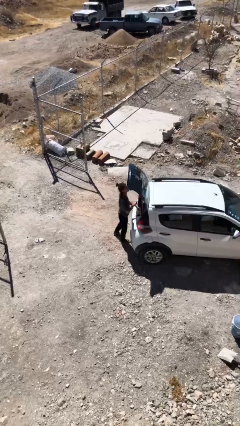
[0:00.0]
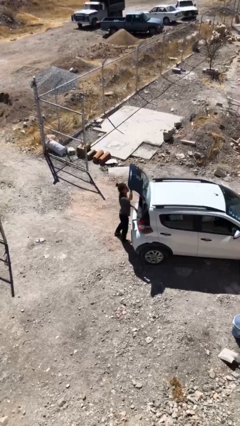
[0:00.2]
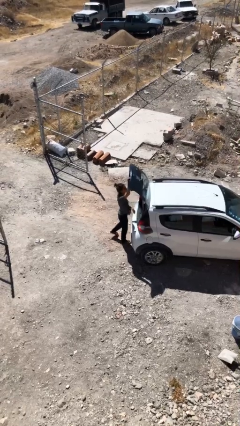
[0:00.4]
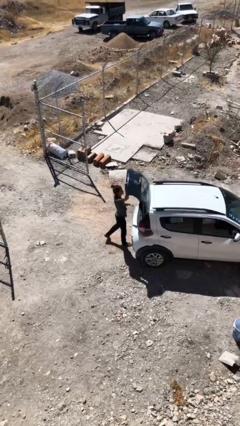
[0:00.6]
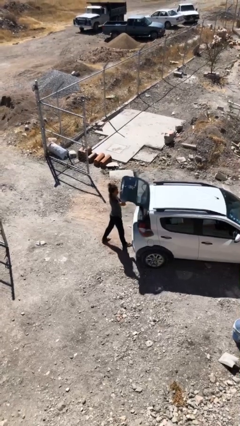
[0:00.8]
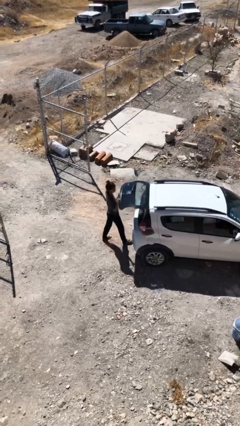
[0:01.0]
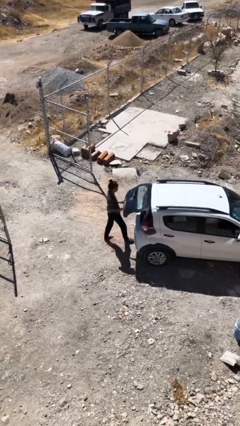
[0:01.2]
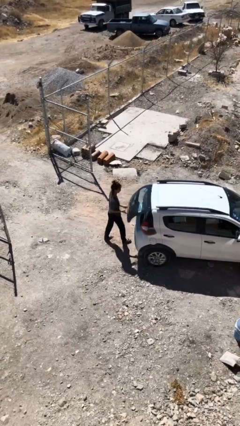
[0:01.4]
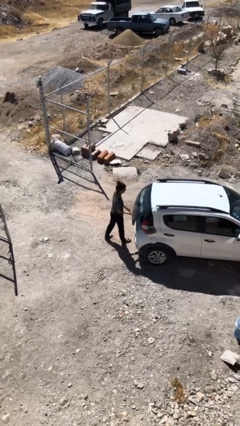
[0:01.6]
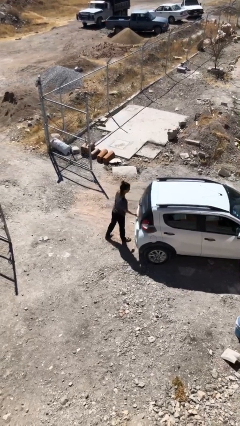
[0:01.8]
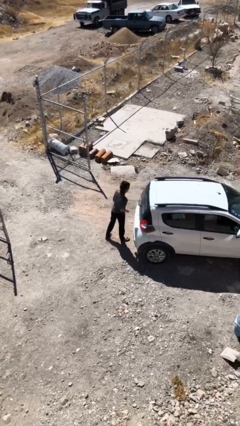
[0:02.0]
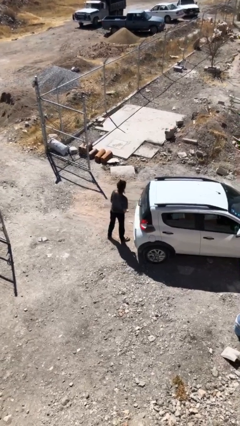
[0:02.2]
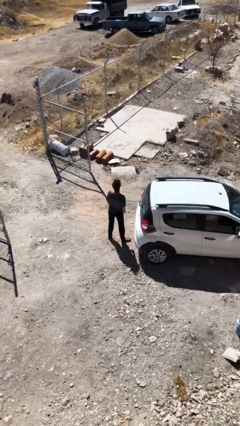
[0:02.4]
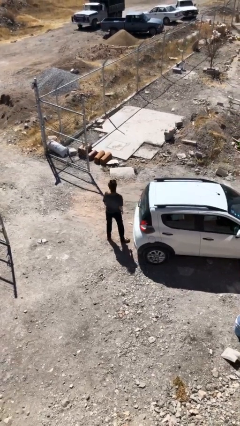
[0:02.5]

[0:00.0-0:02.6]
person closes car trunk

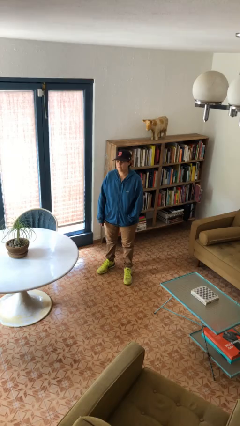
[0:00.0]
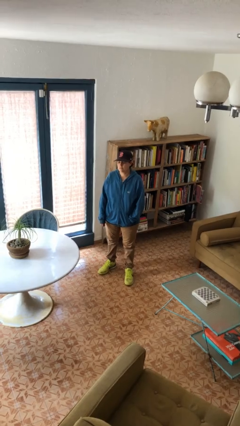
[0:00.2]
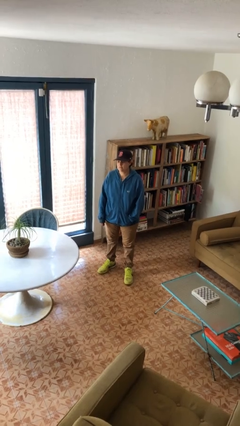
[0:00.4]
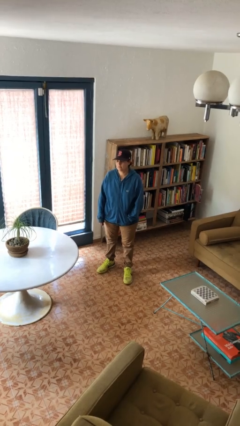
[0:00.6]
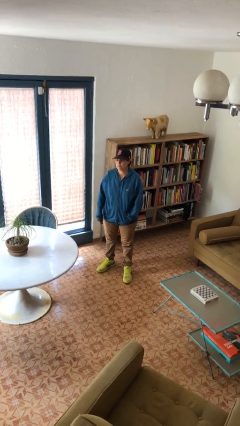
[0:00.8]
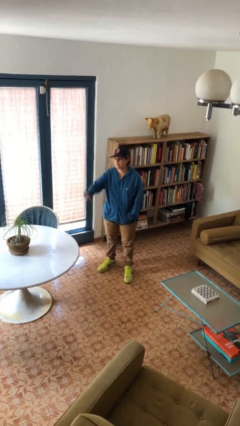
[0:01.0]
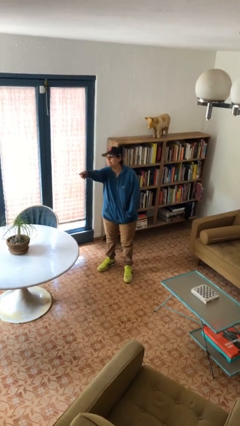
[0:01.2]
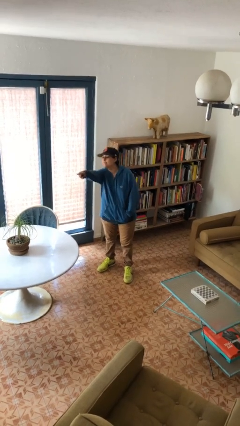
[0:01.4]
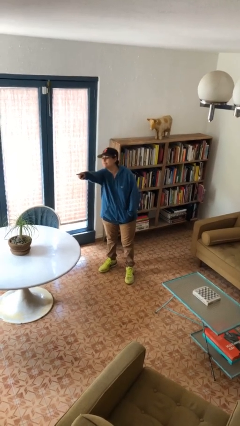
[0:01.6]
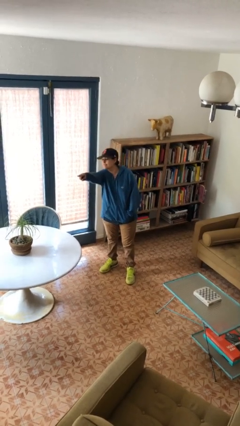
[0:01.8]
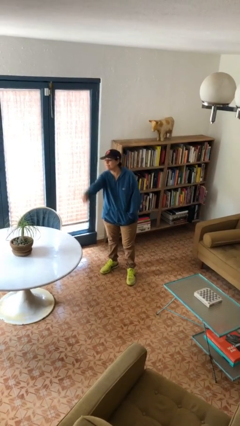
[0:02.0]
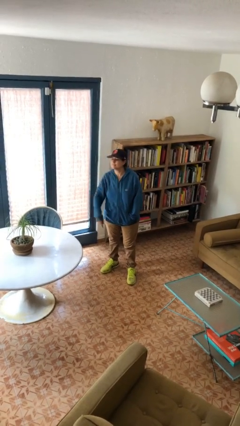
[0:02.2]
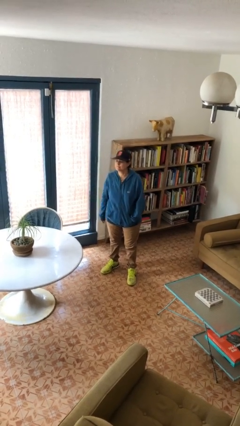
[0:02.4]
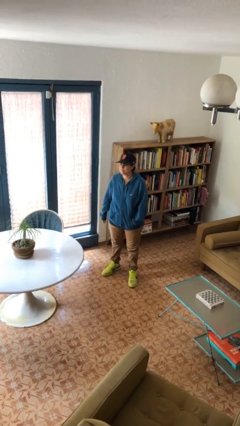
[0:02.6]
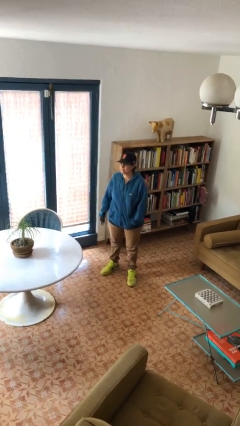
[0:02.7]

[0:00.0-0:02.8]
person points at person

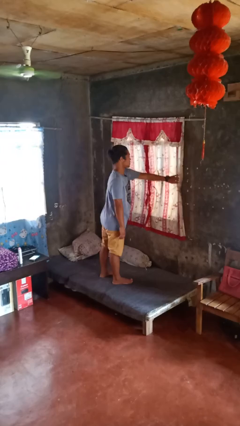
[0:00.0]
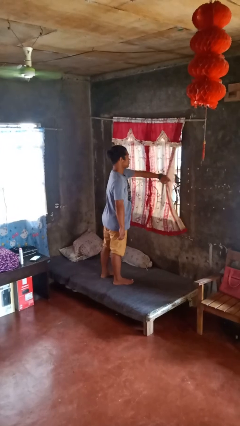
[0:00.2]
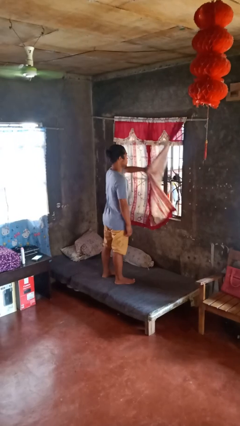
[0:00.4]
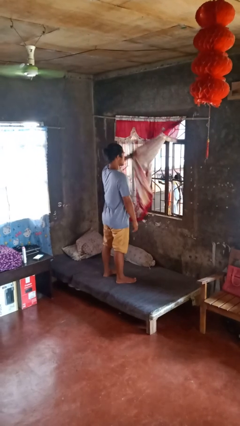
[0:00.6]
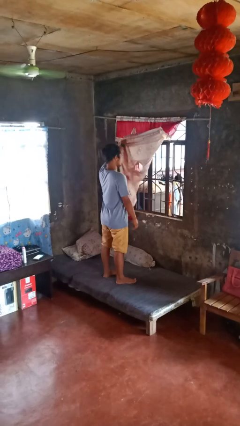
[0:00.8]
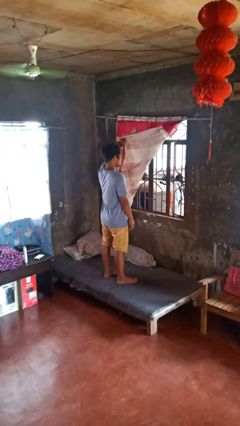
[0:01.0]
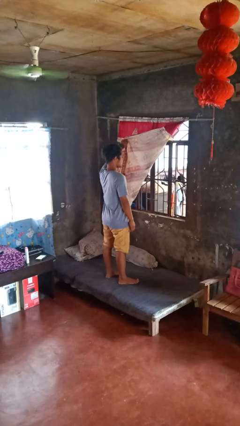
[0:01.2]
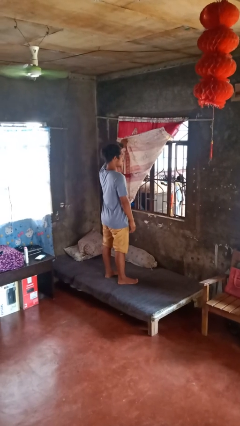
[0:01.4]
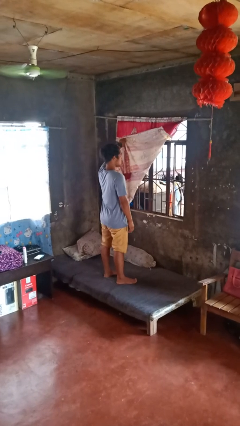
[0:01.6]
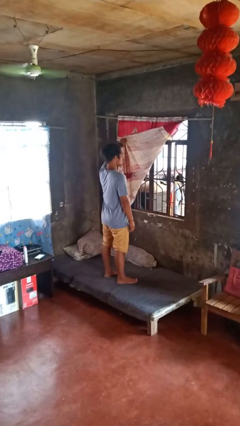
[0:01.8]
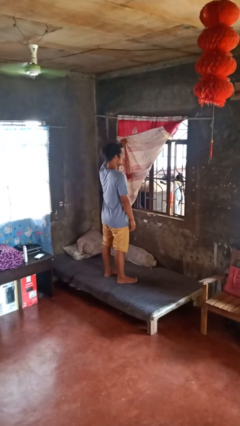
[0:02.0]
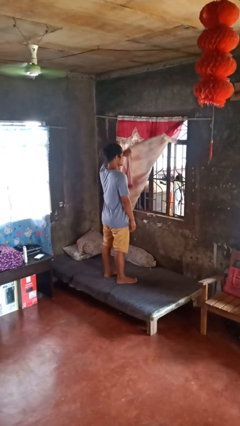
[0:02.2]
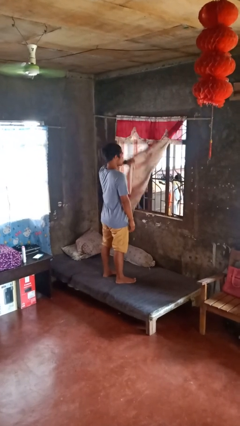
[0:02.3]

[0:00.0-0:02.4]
person opens curtains

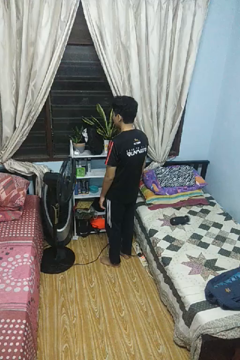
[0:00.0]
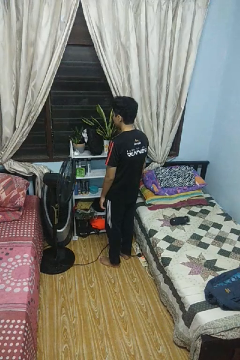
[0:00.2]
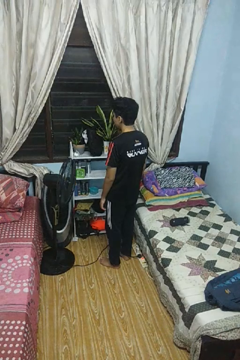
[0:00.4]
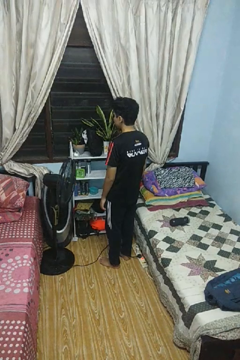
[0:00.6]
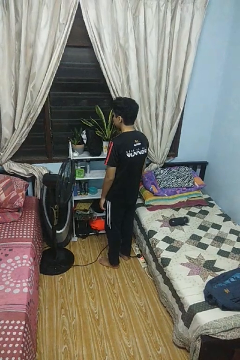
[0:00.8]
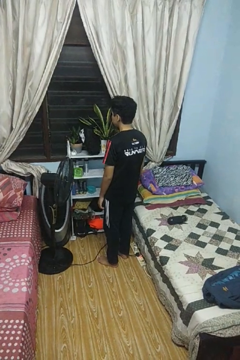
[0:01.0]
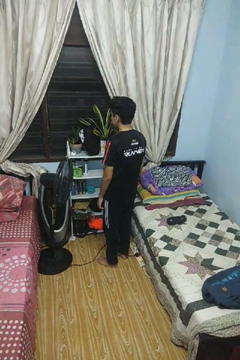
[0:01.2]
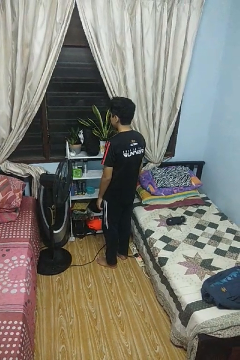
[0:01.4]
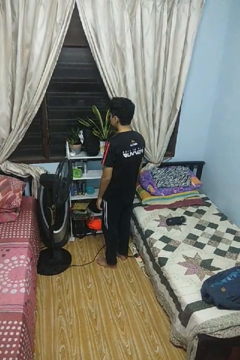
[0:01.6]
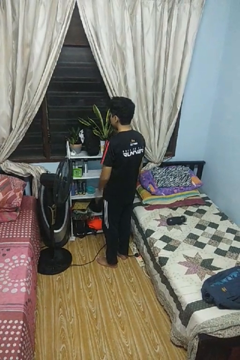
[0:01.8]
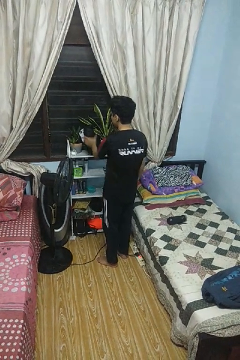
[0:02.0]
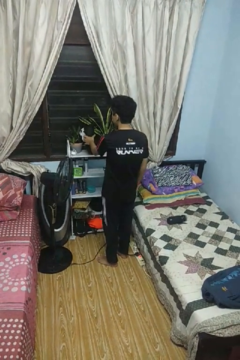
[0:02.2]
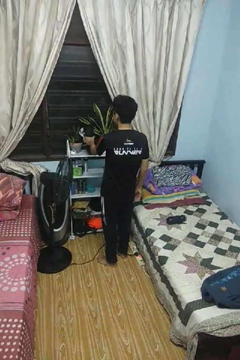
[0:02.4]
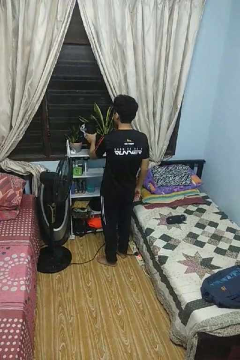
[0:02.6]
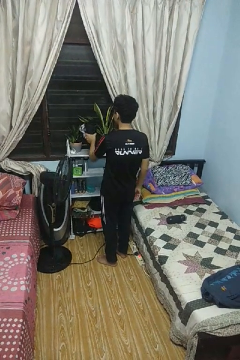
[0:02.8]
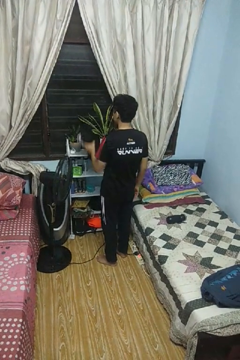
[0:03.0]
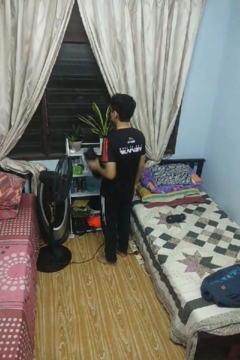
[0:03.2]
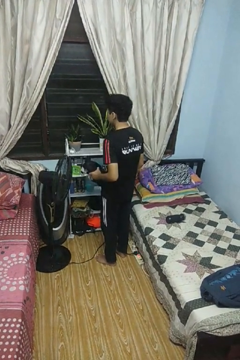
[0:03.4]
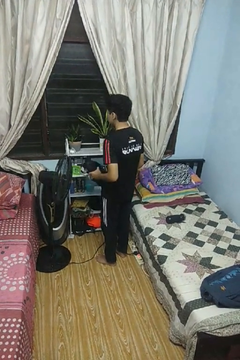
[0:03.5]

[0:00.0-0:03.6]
person picks up object from countertop

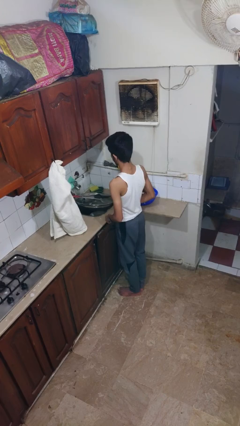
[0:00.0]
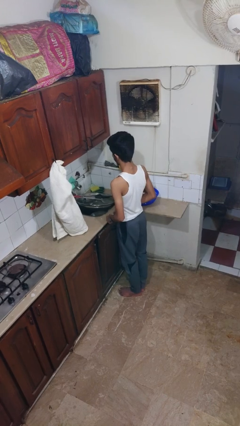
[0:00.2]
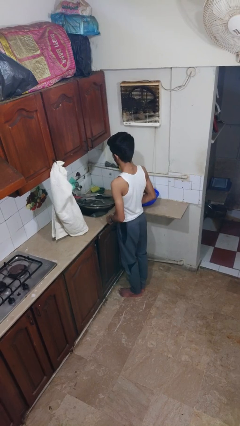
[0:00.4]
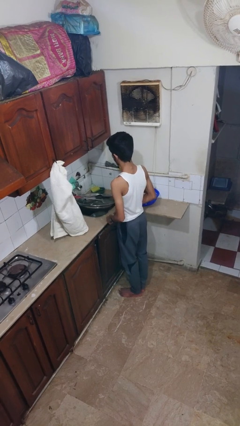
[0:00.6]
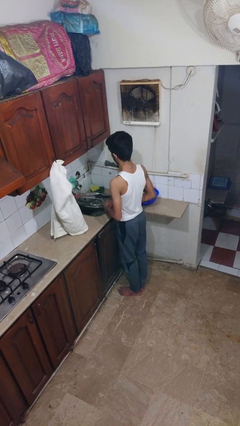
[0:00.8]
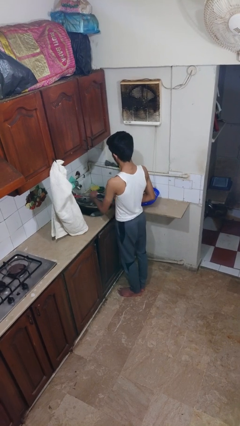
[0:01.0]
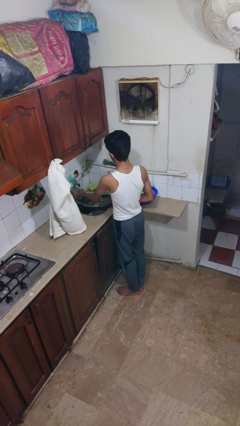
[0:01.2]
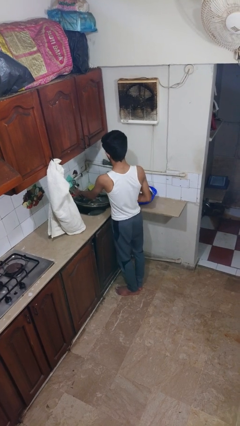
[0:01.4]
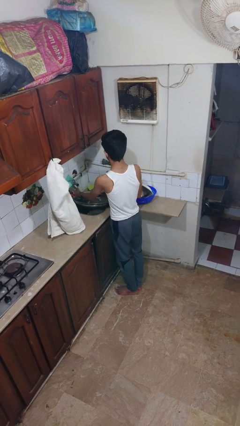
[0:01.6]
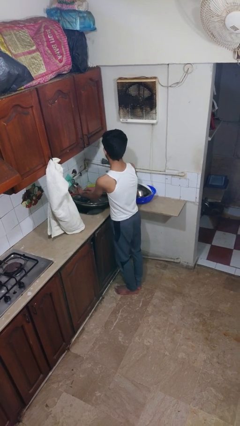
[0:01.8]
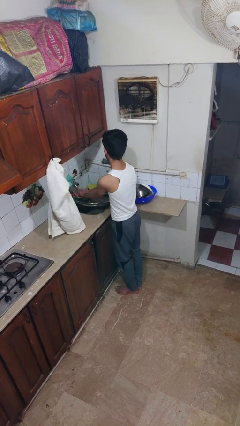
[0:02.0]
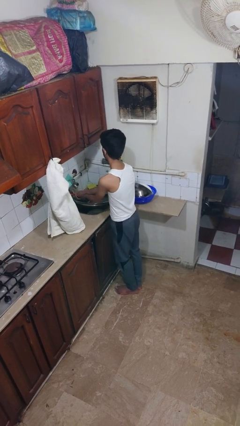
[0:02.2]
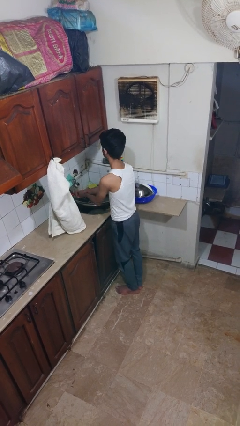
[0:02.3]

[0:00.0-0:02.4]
person washes hands

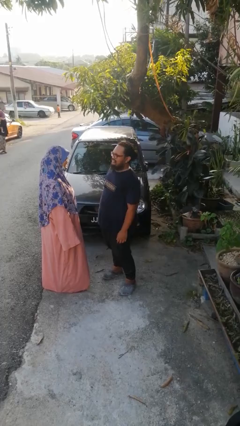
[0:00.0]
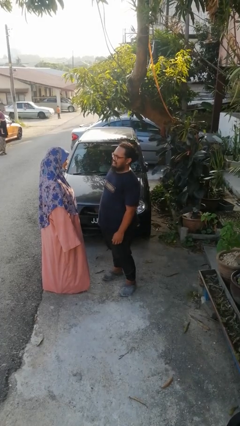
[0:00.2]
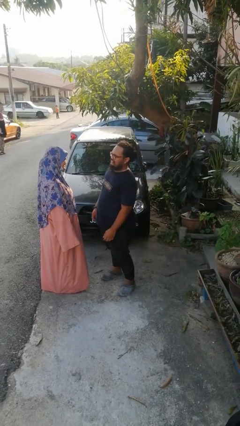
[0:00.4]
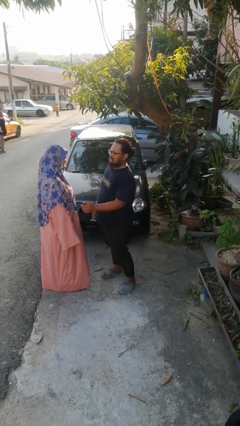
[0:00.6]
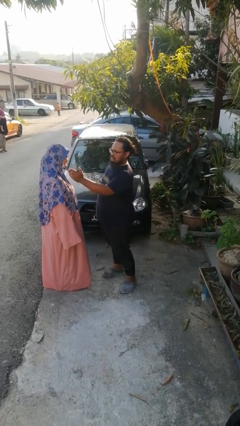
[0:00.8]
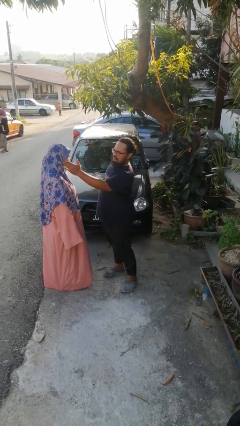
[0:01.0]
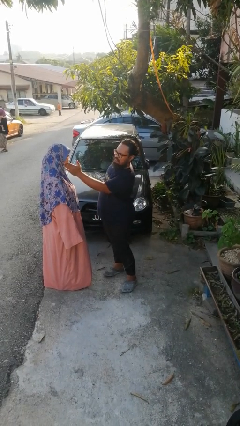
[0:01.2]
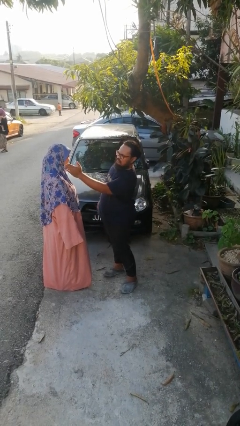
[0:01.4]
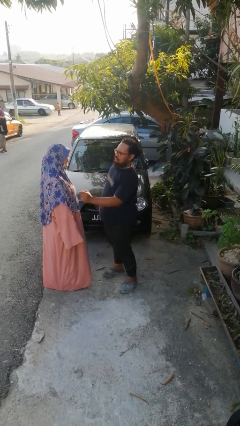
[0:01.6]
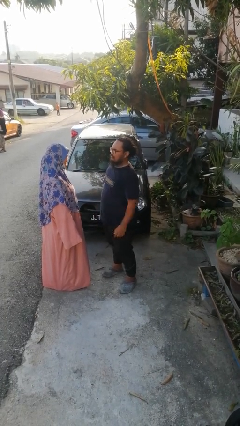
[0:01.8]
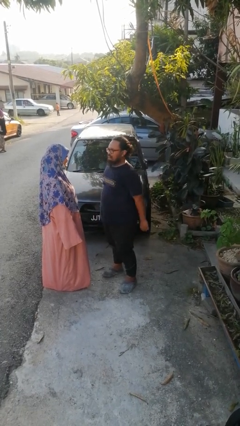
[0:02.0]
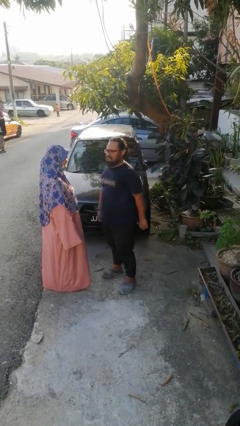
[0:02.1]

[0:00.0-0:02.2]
person touches face of person

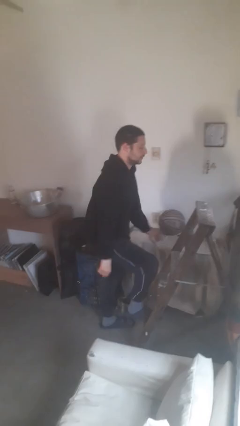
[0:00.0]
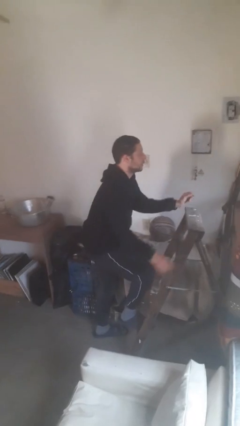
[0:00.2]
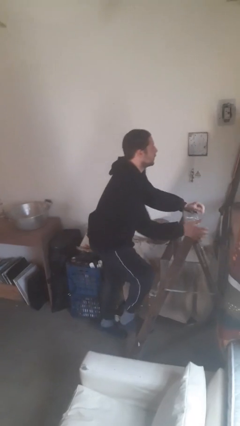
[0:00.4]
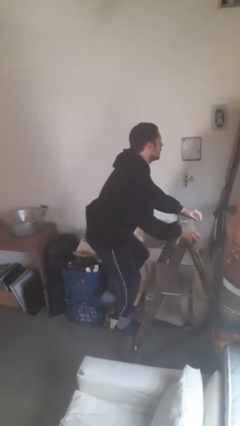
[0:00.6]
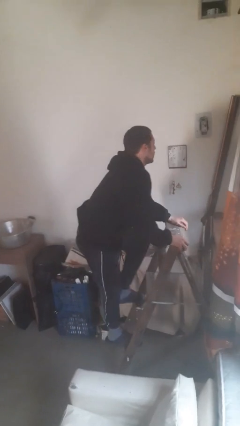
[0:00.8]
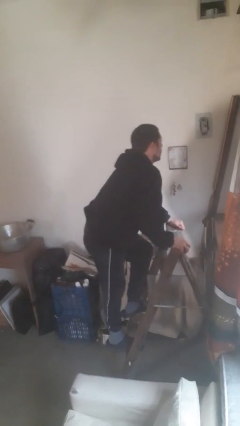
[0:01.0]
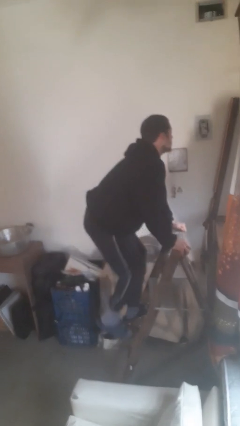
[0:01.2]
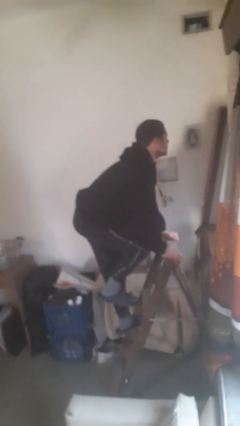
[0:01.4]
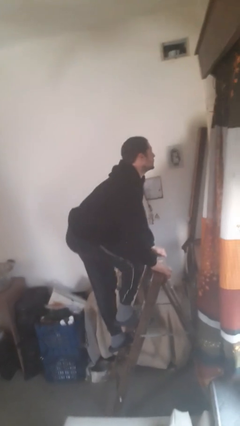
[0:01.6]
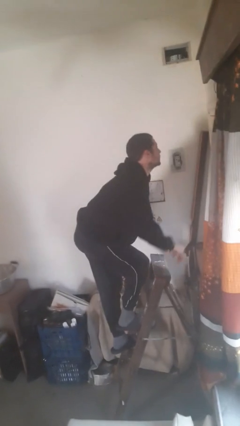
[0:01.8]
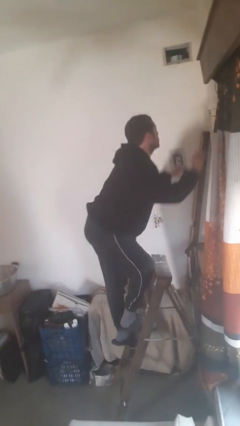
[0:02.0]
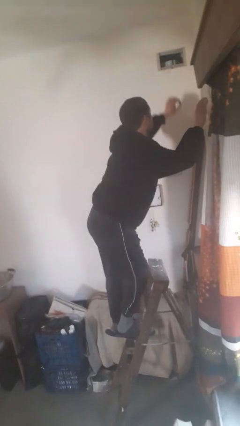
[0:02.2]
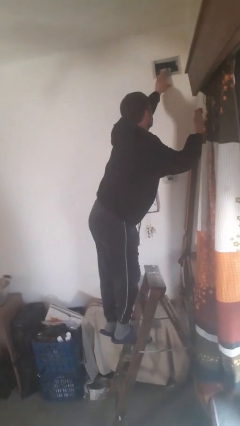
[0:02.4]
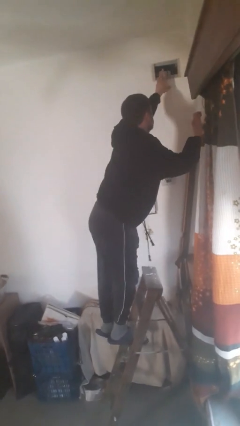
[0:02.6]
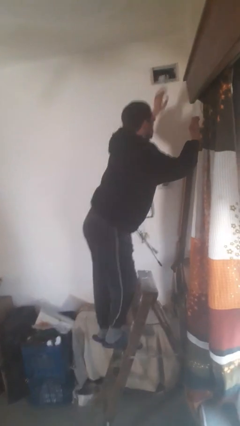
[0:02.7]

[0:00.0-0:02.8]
person climbs up ladder
